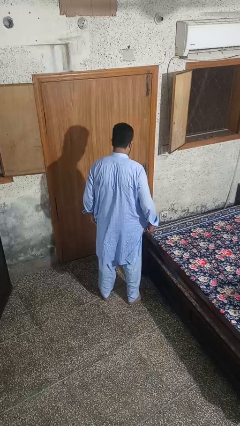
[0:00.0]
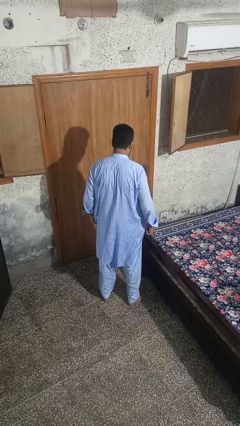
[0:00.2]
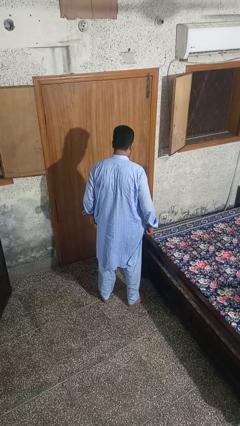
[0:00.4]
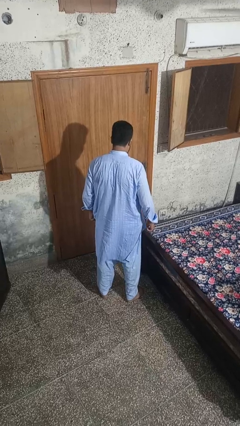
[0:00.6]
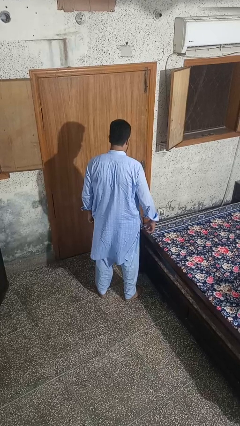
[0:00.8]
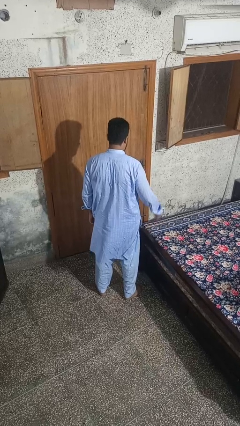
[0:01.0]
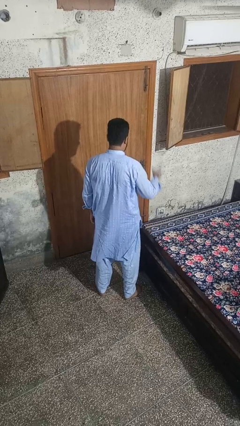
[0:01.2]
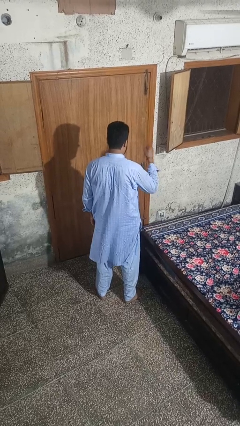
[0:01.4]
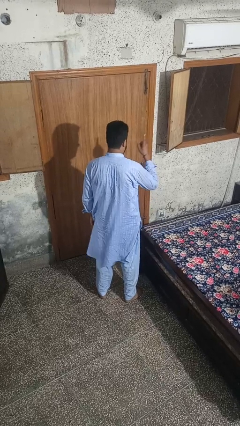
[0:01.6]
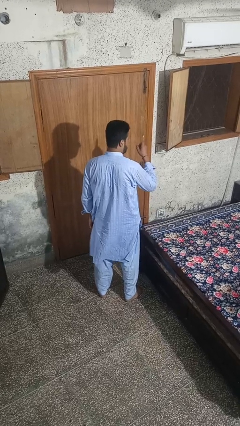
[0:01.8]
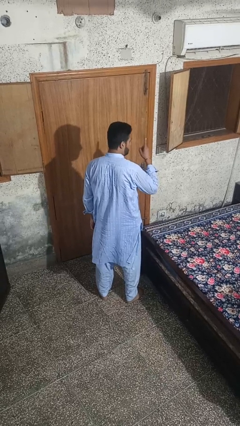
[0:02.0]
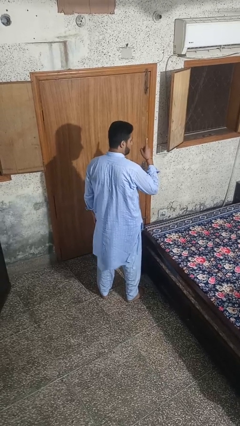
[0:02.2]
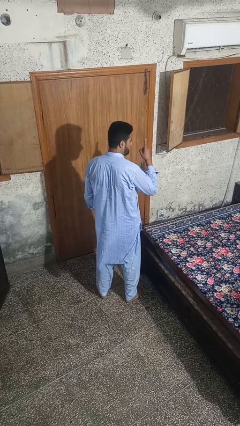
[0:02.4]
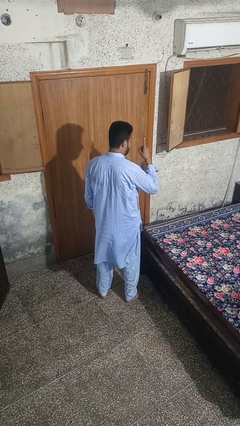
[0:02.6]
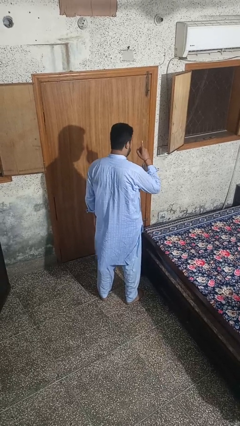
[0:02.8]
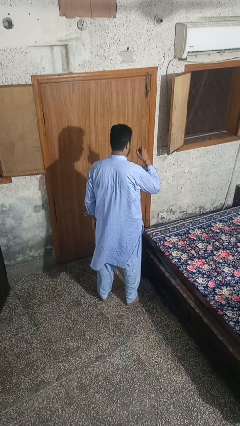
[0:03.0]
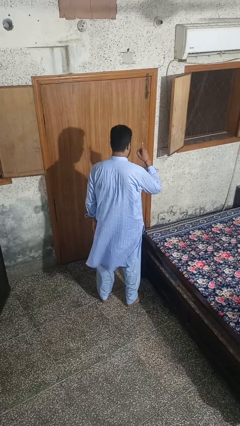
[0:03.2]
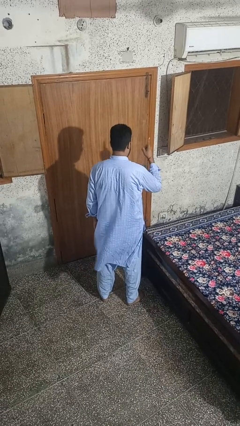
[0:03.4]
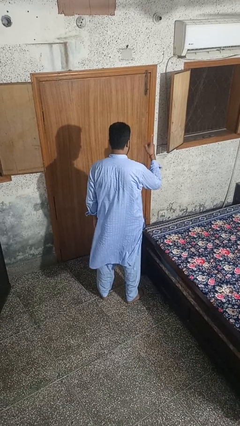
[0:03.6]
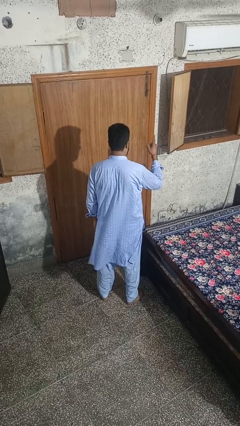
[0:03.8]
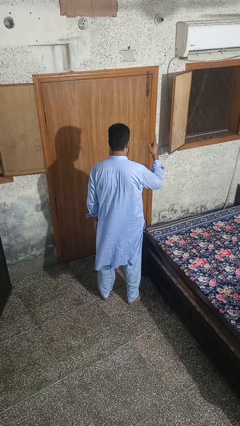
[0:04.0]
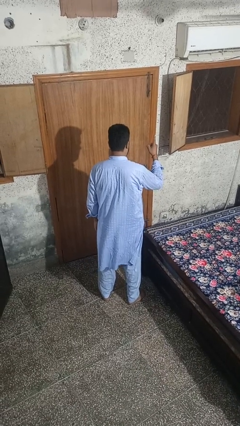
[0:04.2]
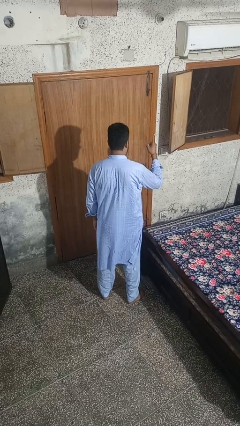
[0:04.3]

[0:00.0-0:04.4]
person gestures number one

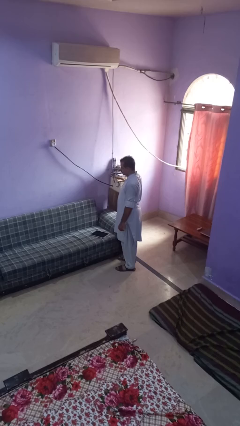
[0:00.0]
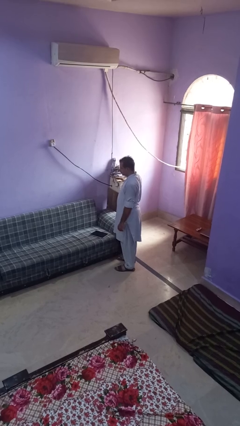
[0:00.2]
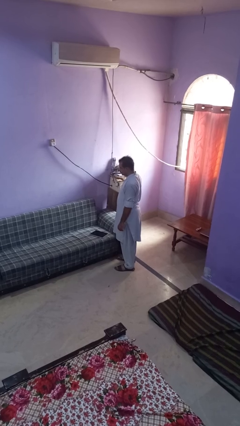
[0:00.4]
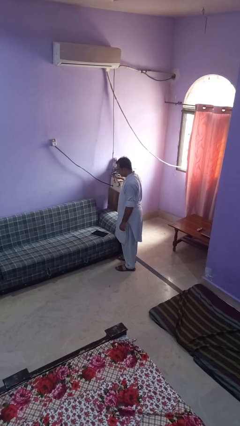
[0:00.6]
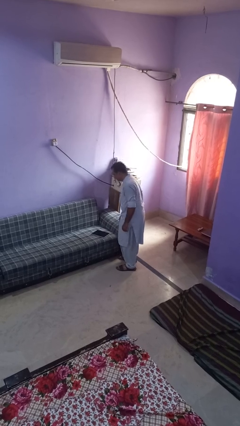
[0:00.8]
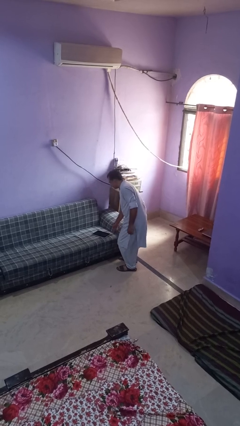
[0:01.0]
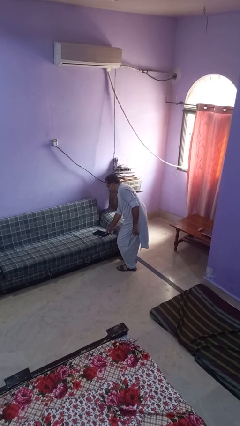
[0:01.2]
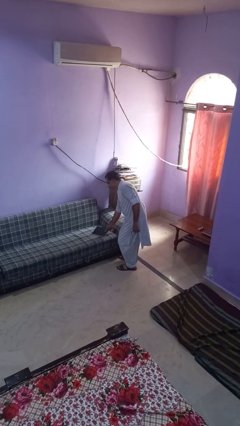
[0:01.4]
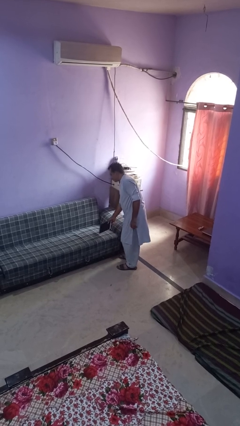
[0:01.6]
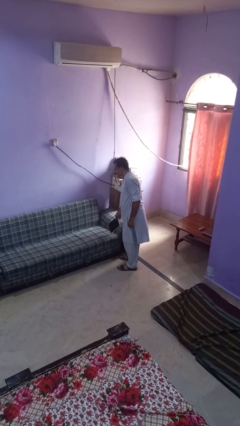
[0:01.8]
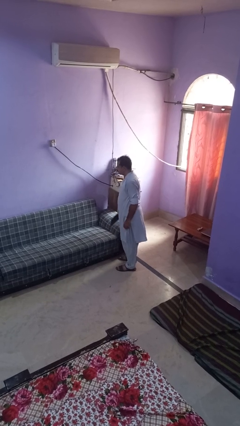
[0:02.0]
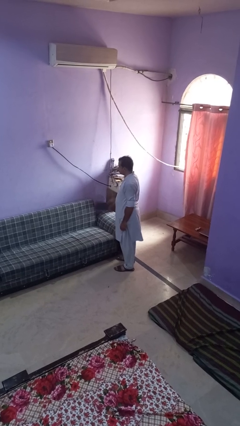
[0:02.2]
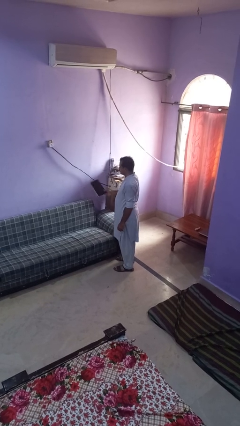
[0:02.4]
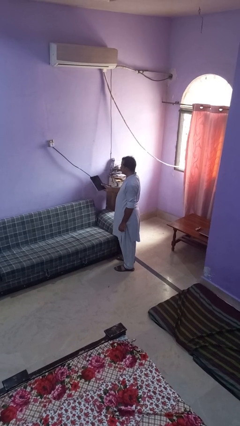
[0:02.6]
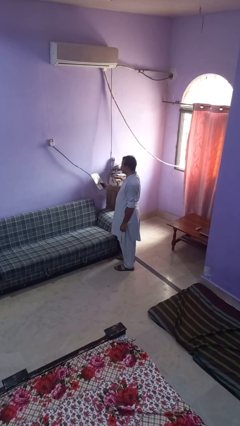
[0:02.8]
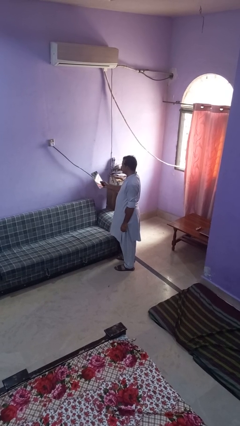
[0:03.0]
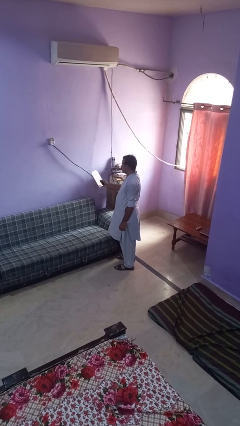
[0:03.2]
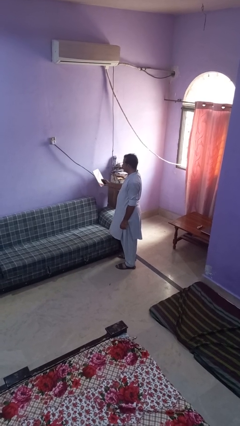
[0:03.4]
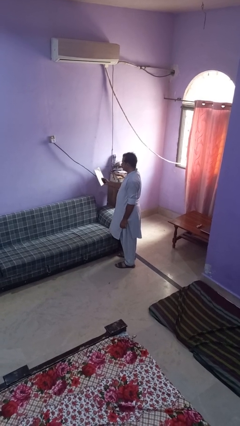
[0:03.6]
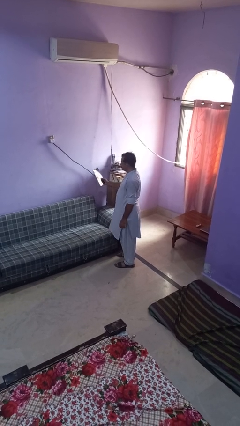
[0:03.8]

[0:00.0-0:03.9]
person picks up object from couch

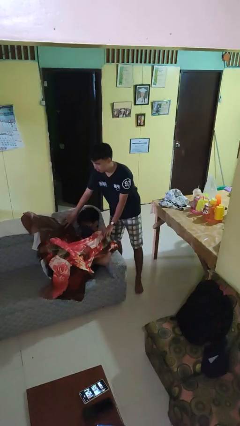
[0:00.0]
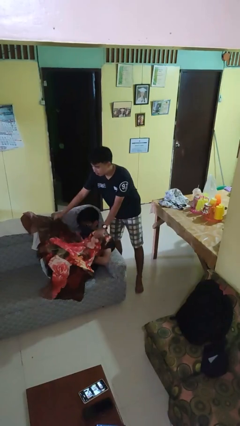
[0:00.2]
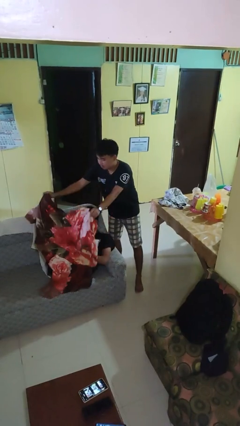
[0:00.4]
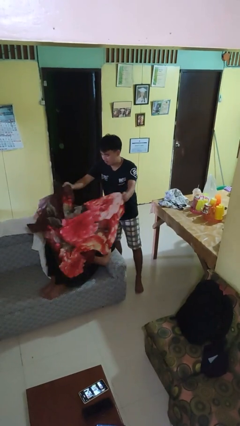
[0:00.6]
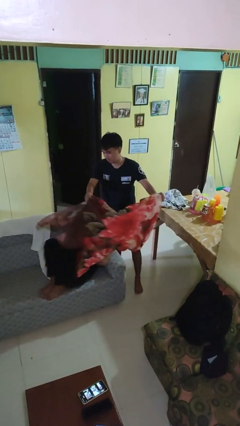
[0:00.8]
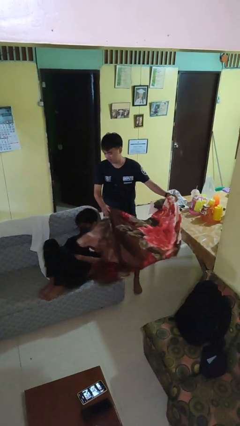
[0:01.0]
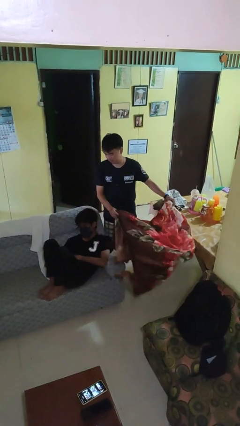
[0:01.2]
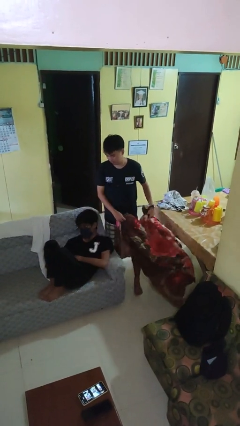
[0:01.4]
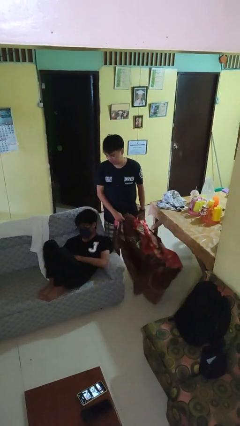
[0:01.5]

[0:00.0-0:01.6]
person uncovers friend with blanket

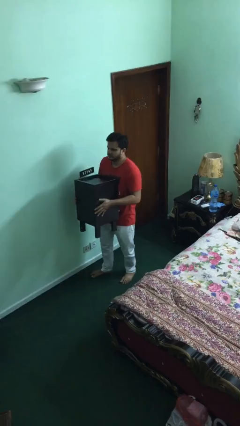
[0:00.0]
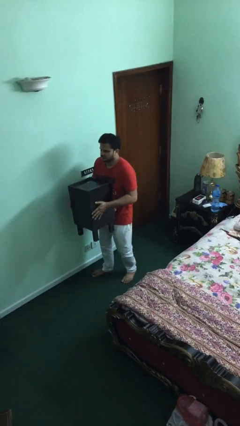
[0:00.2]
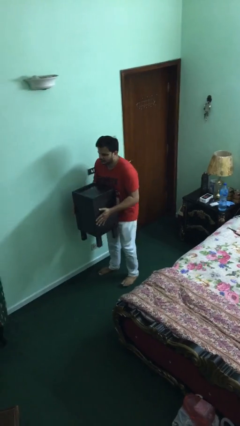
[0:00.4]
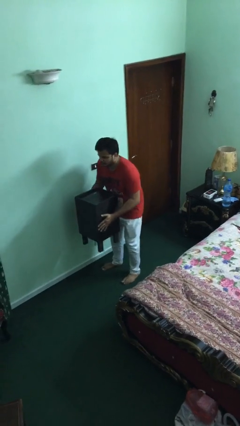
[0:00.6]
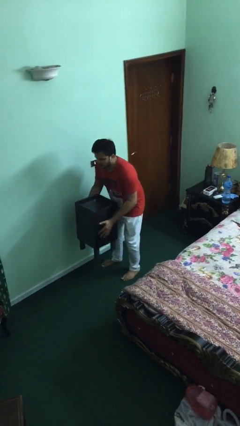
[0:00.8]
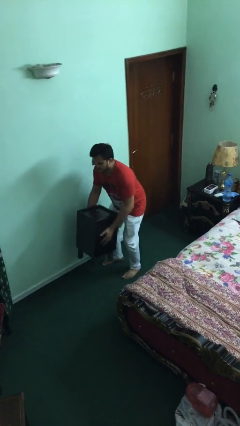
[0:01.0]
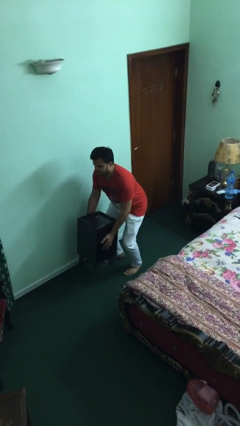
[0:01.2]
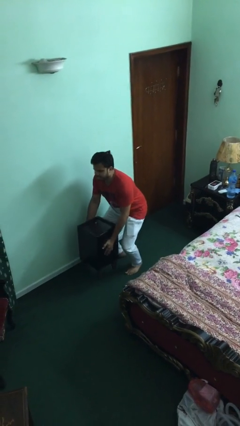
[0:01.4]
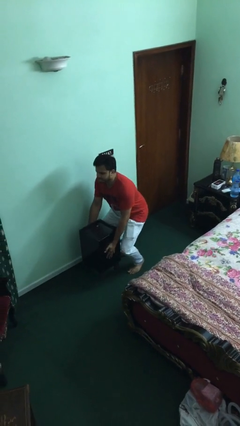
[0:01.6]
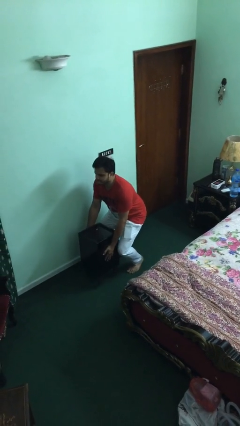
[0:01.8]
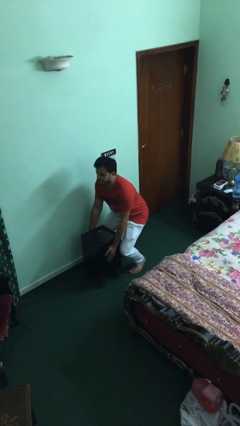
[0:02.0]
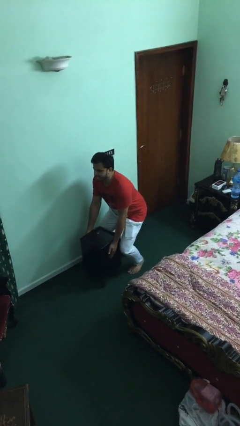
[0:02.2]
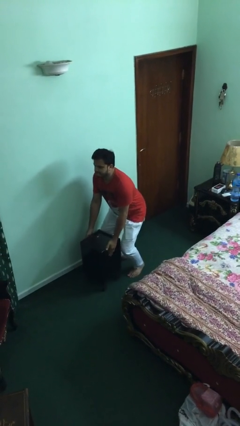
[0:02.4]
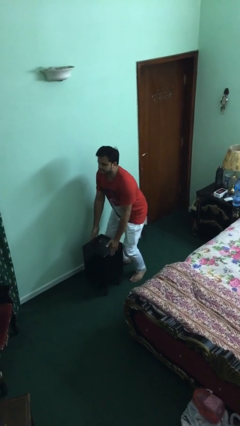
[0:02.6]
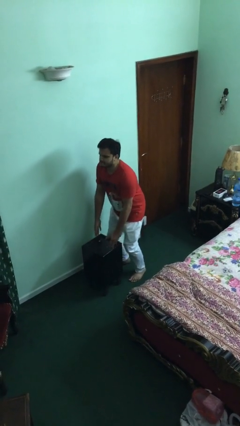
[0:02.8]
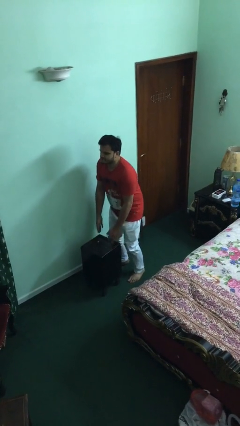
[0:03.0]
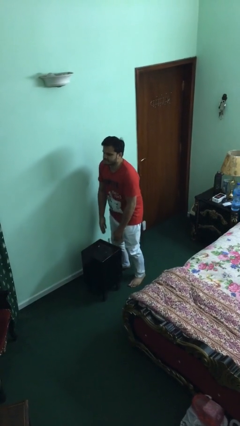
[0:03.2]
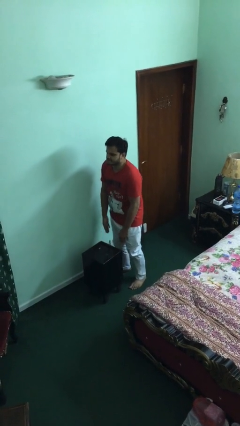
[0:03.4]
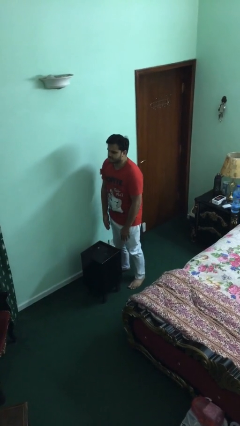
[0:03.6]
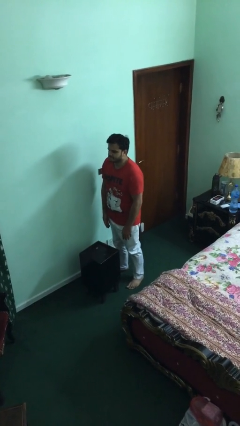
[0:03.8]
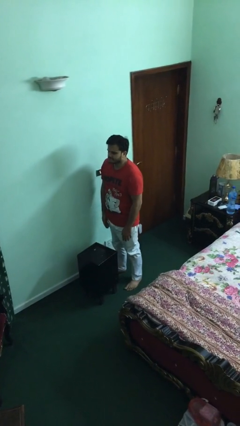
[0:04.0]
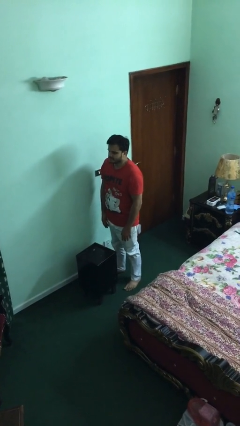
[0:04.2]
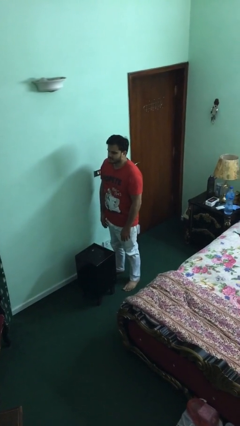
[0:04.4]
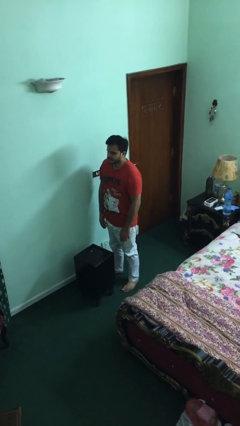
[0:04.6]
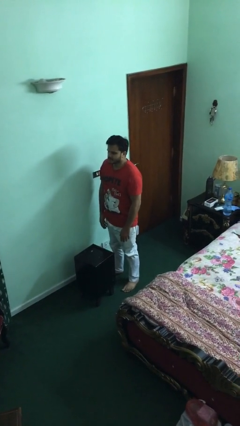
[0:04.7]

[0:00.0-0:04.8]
person puts down object on floor

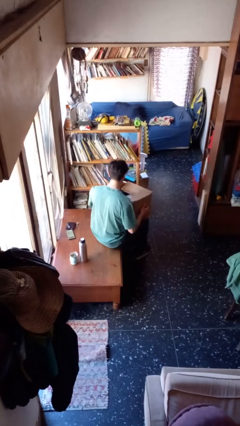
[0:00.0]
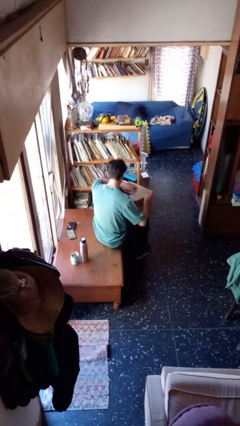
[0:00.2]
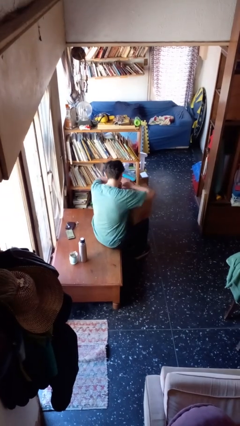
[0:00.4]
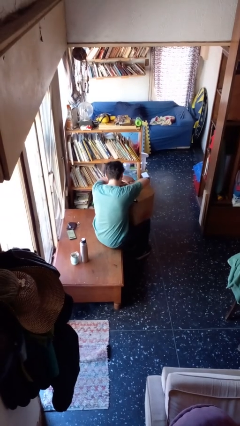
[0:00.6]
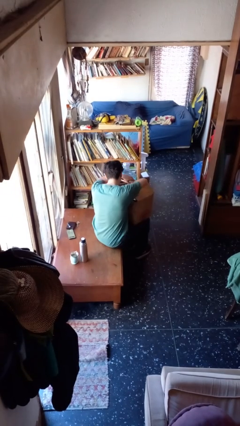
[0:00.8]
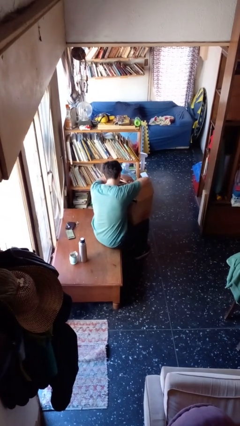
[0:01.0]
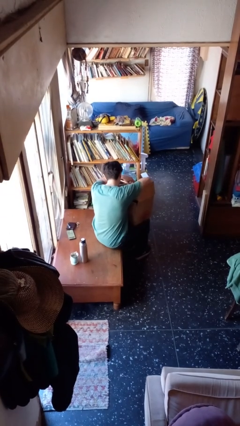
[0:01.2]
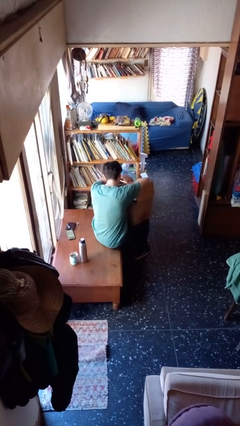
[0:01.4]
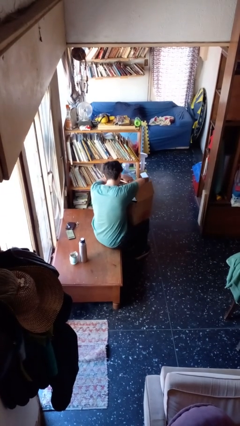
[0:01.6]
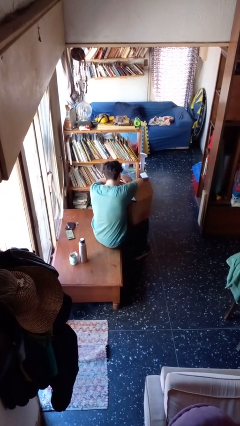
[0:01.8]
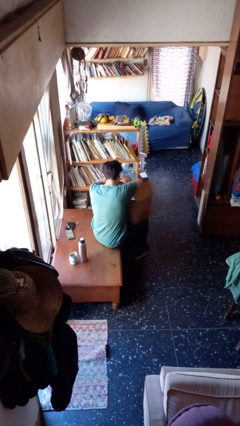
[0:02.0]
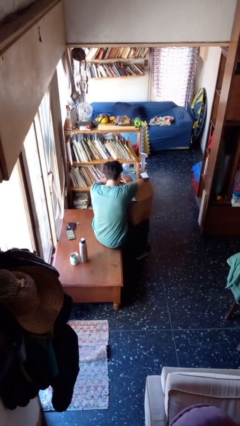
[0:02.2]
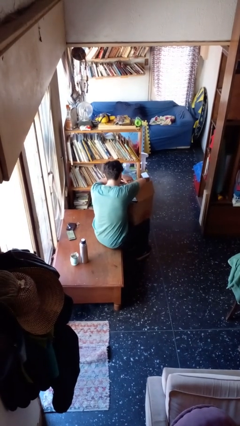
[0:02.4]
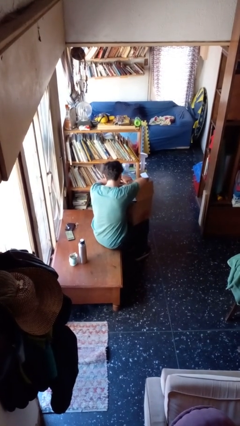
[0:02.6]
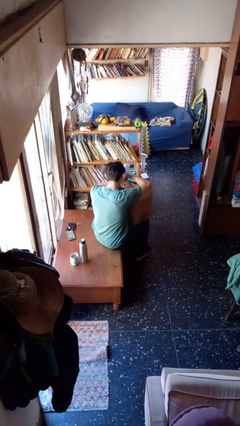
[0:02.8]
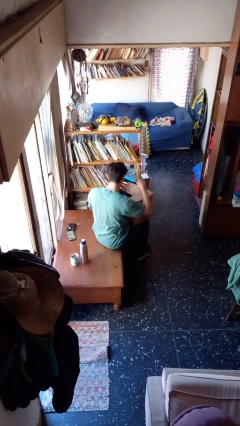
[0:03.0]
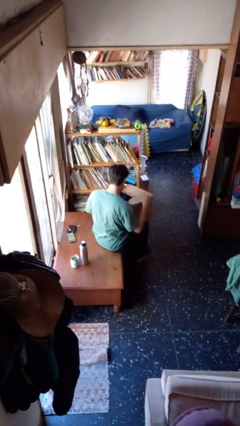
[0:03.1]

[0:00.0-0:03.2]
person searches in box
